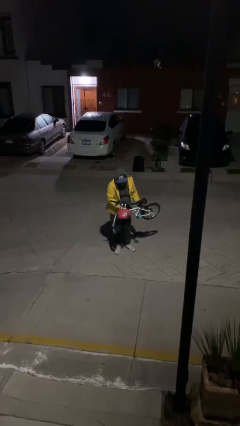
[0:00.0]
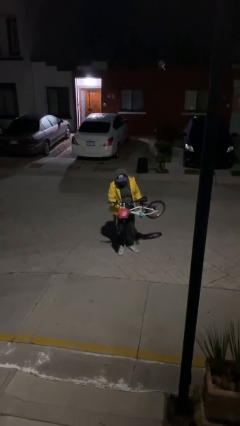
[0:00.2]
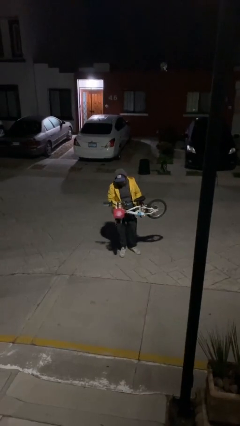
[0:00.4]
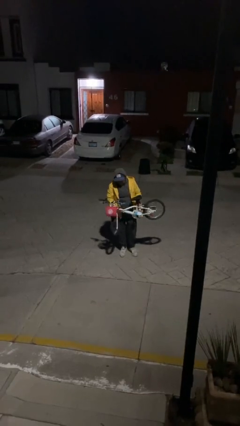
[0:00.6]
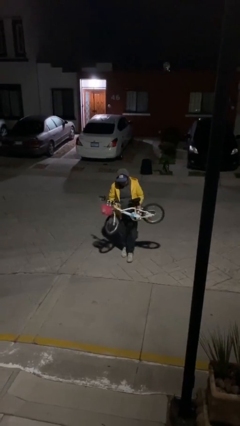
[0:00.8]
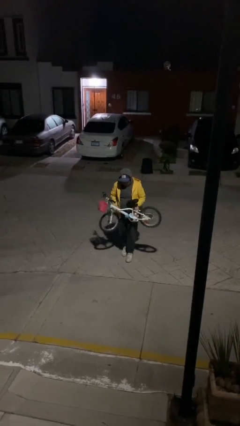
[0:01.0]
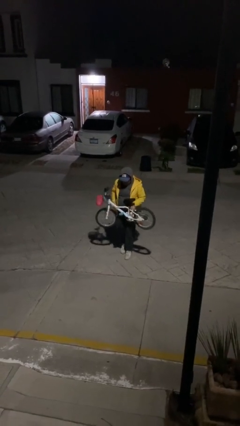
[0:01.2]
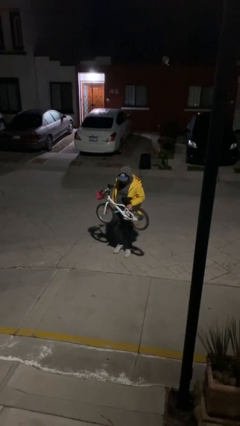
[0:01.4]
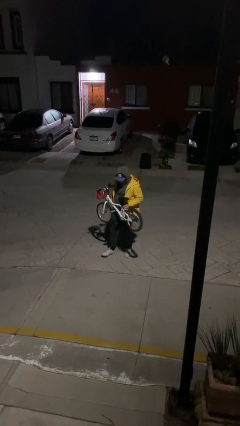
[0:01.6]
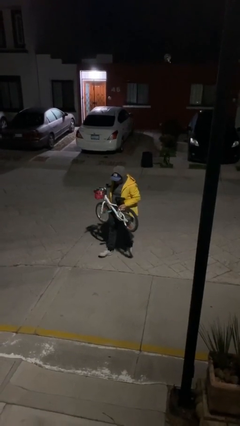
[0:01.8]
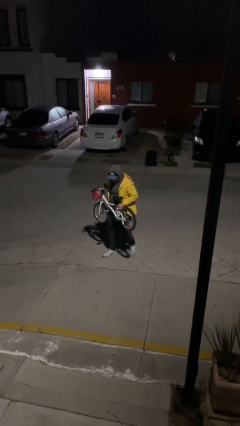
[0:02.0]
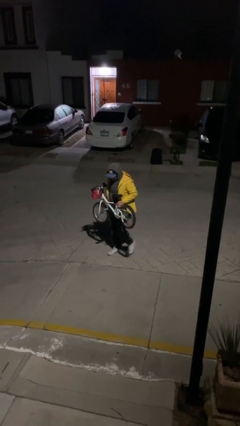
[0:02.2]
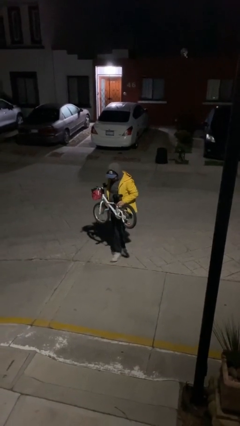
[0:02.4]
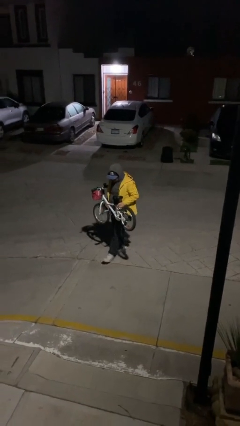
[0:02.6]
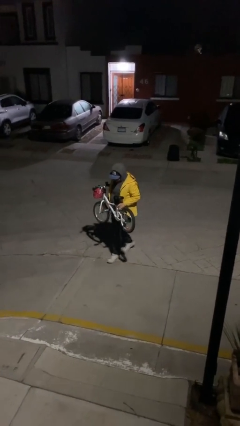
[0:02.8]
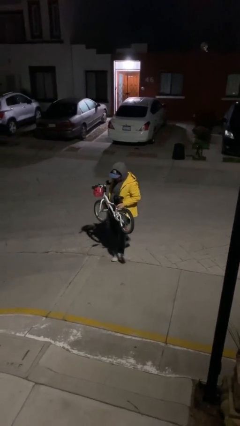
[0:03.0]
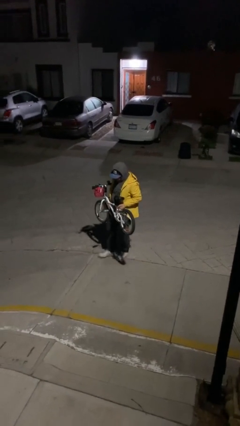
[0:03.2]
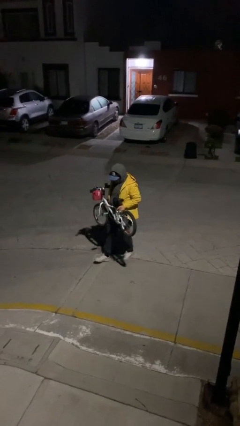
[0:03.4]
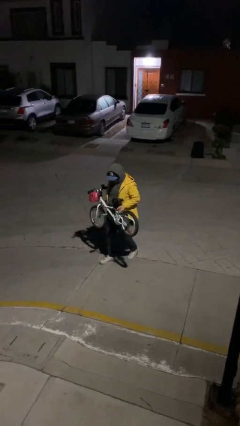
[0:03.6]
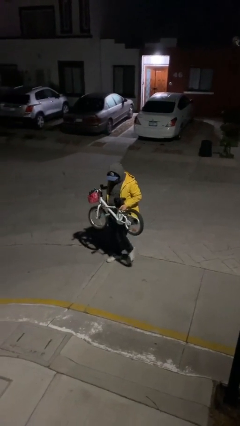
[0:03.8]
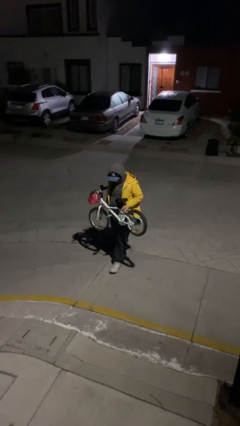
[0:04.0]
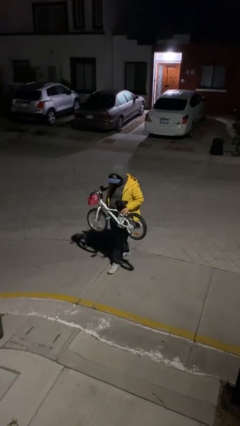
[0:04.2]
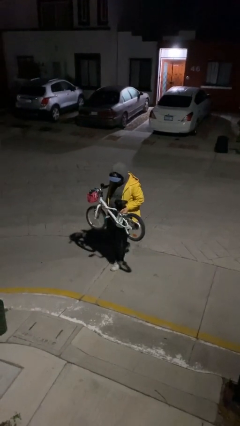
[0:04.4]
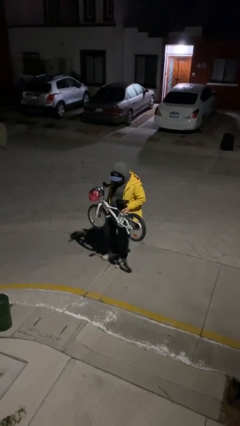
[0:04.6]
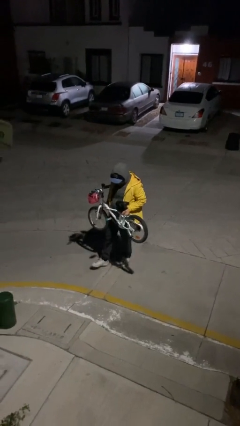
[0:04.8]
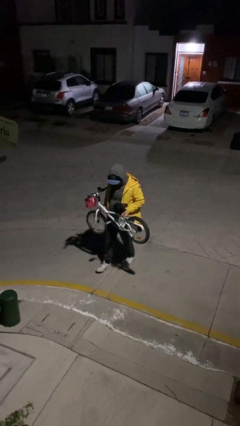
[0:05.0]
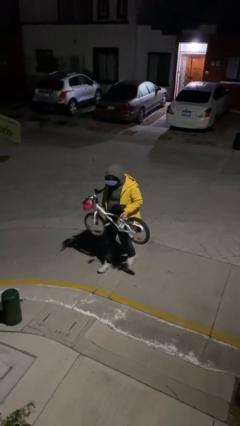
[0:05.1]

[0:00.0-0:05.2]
person carries heavy object

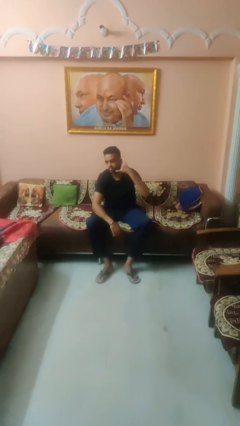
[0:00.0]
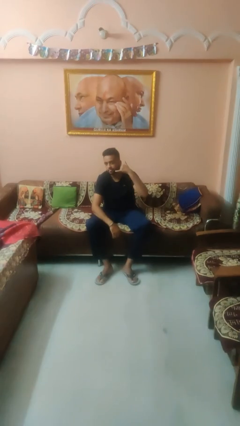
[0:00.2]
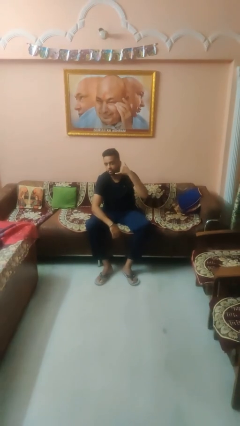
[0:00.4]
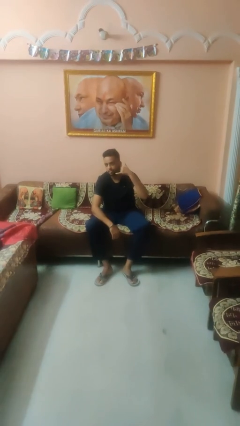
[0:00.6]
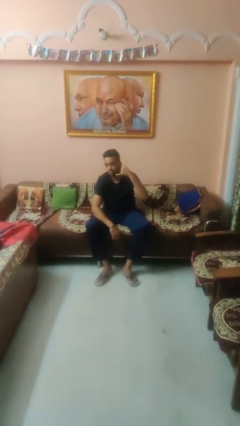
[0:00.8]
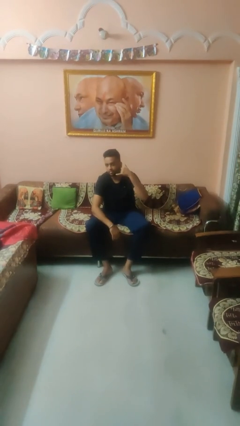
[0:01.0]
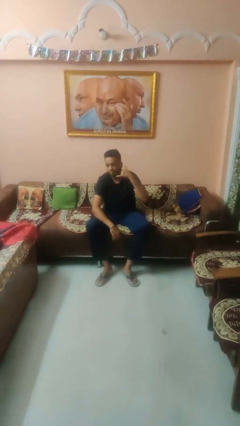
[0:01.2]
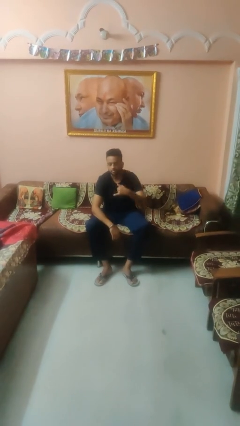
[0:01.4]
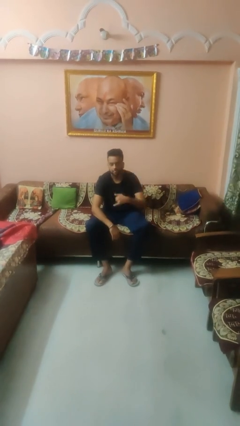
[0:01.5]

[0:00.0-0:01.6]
person gestures call me

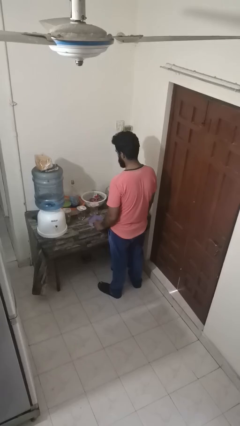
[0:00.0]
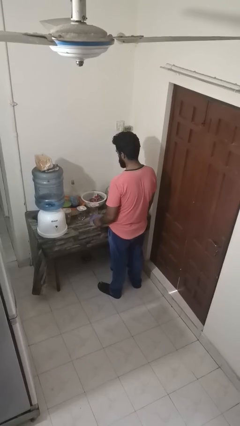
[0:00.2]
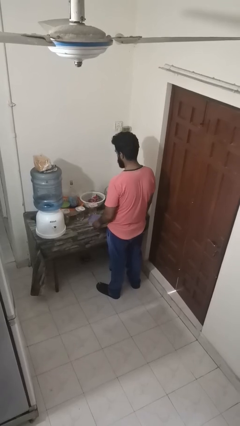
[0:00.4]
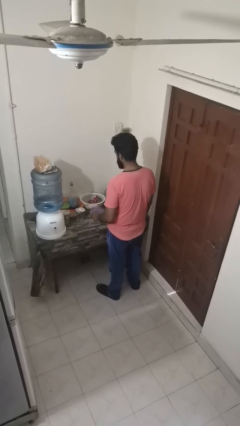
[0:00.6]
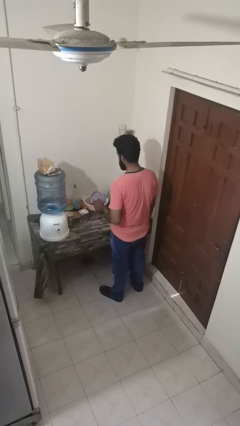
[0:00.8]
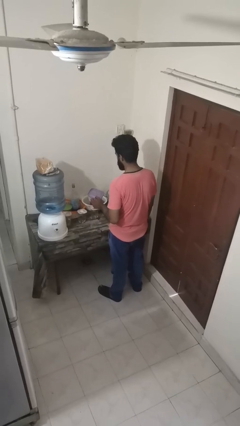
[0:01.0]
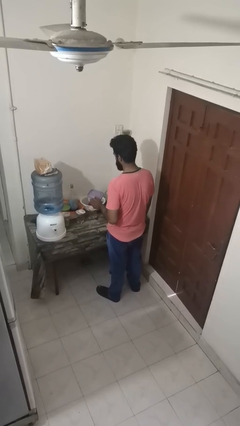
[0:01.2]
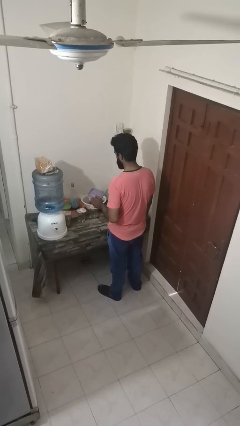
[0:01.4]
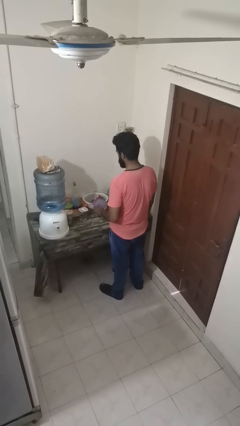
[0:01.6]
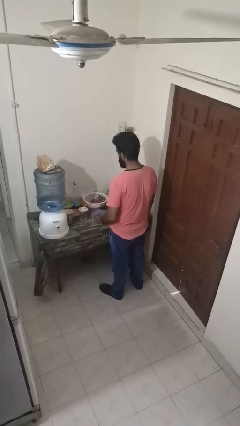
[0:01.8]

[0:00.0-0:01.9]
person picks up object from countertop

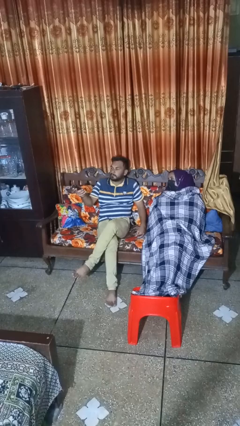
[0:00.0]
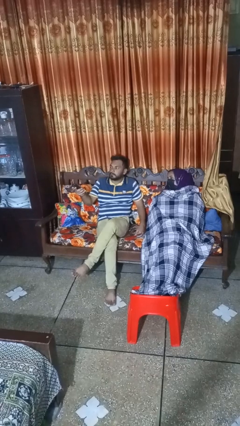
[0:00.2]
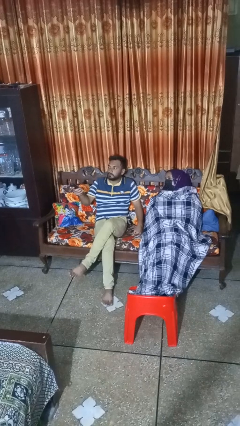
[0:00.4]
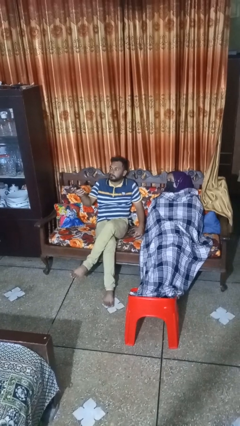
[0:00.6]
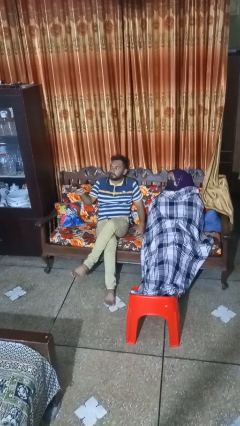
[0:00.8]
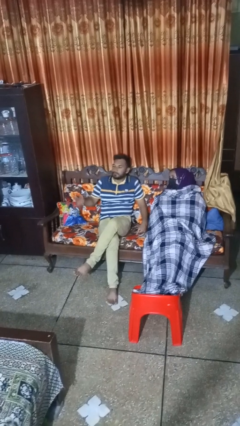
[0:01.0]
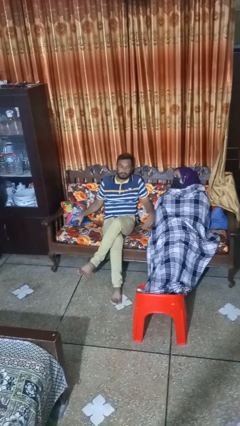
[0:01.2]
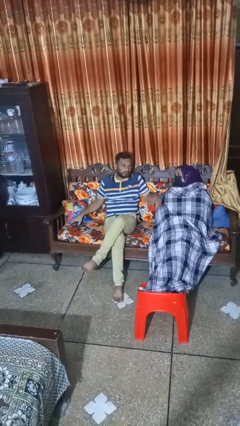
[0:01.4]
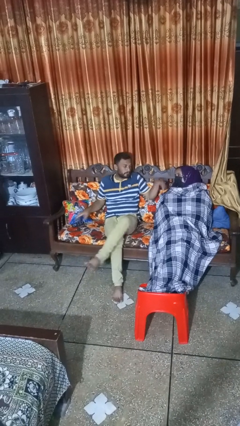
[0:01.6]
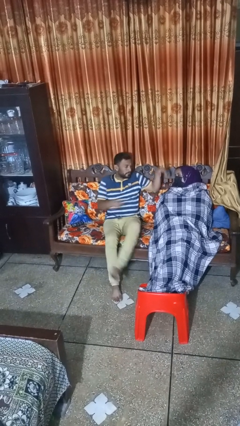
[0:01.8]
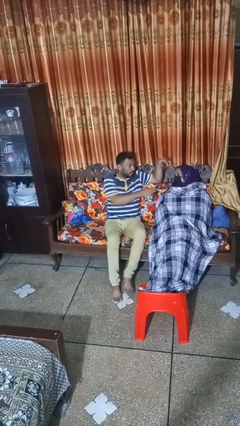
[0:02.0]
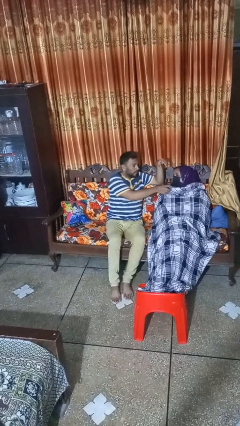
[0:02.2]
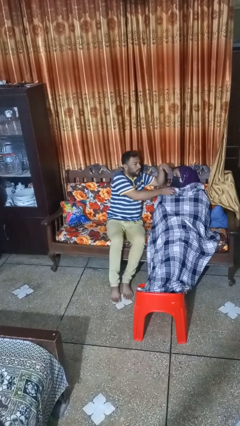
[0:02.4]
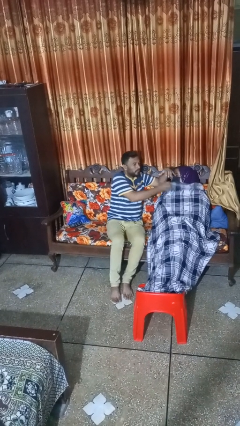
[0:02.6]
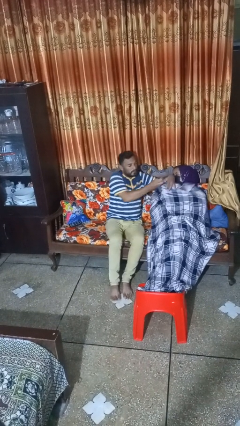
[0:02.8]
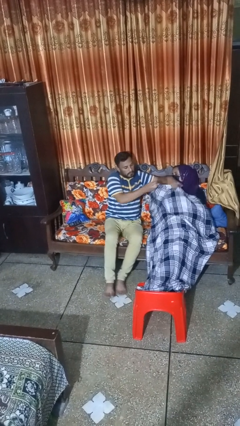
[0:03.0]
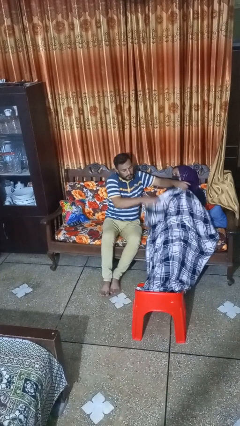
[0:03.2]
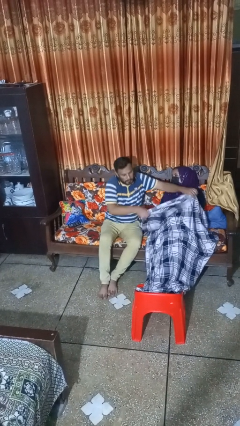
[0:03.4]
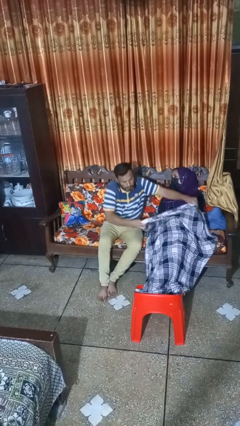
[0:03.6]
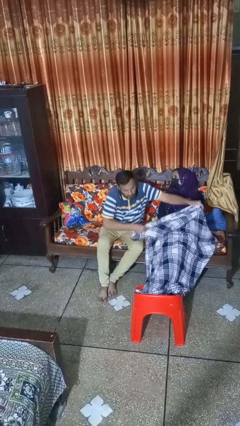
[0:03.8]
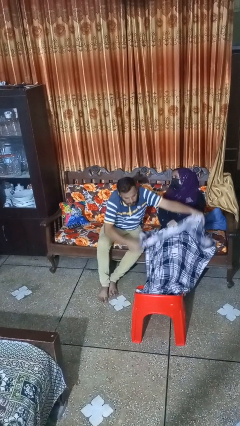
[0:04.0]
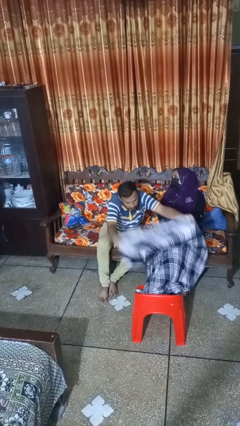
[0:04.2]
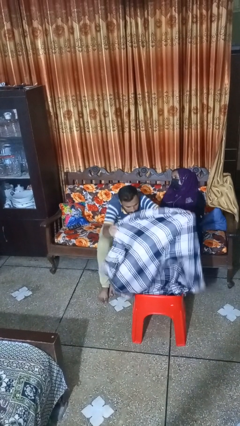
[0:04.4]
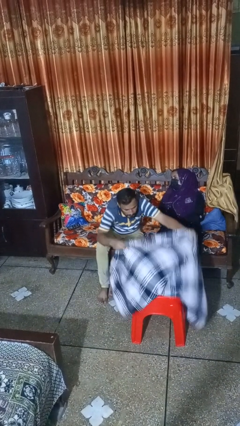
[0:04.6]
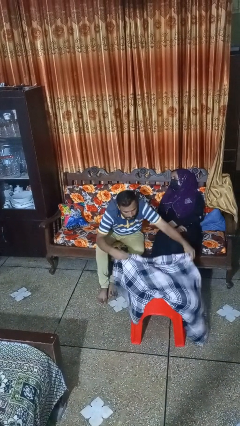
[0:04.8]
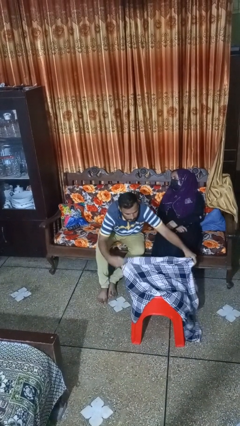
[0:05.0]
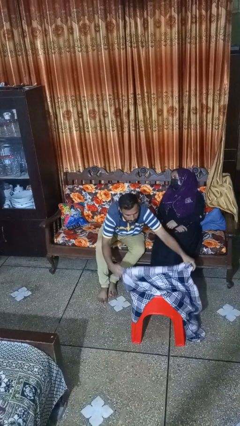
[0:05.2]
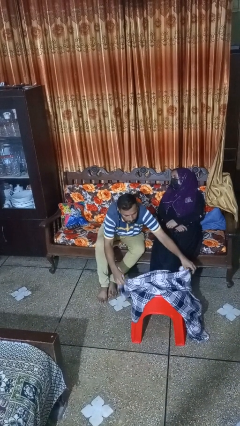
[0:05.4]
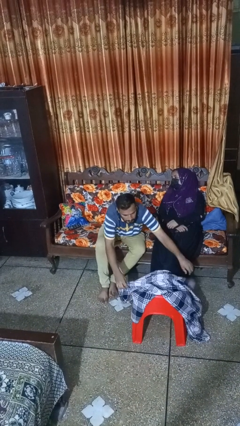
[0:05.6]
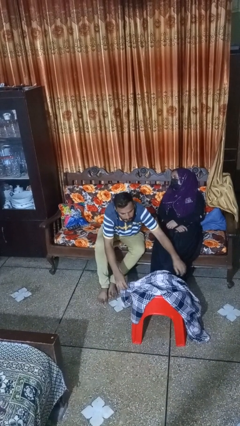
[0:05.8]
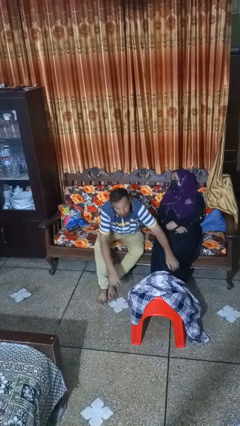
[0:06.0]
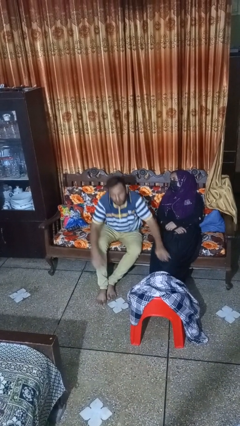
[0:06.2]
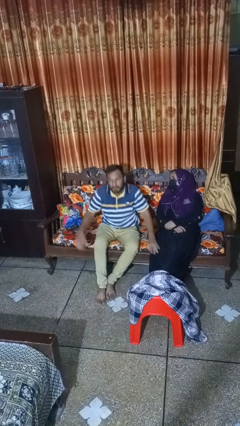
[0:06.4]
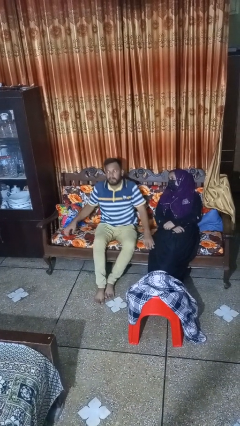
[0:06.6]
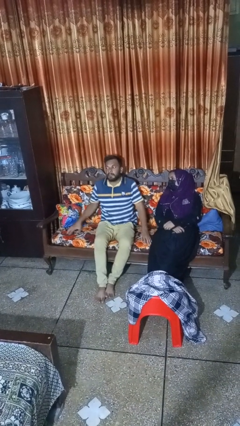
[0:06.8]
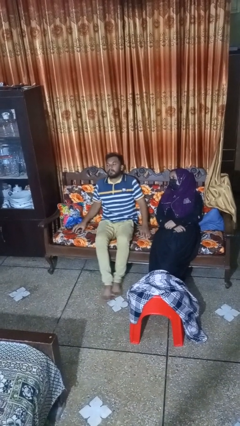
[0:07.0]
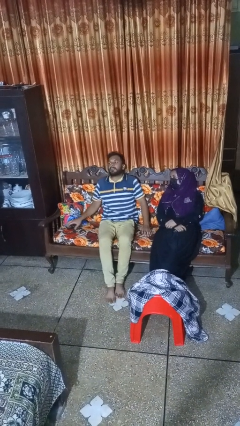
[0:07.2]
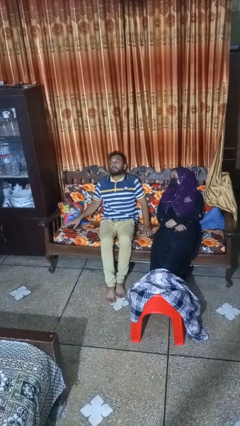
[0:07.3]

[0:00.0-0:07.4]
person uncovers friend with blanket

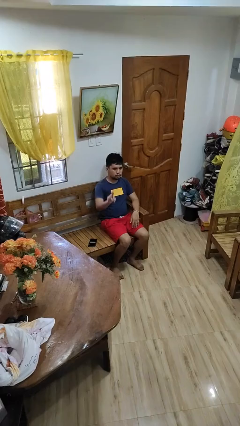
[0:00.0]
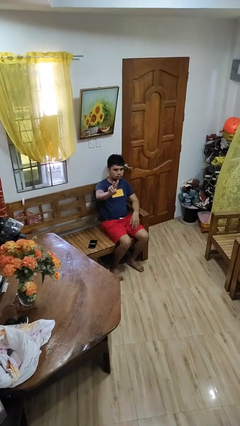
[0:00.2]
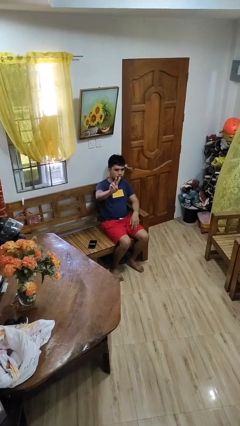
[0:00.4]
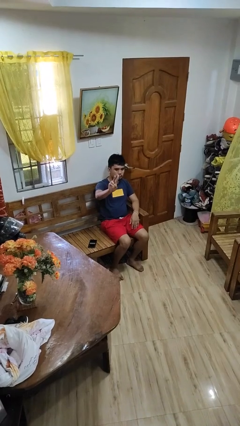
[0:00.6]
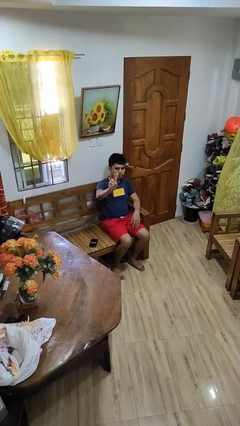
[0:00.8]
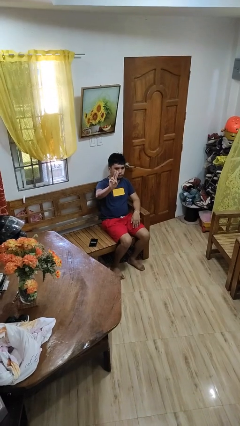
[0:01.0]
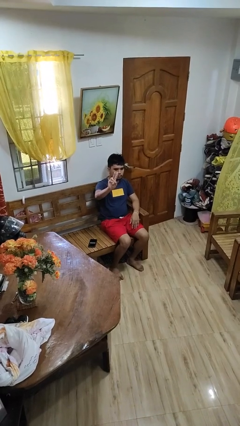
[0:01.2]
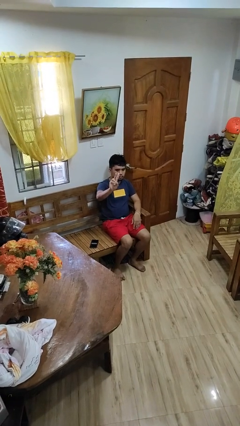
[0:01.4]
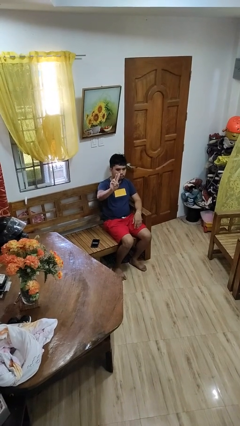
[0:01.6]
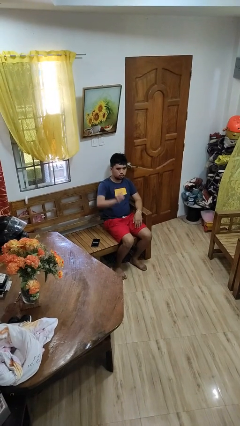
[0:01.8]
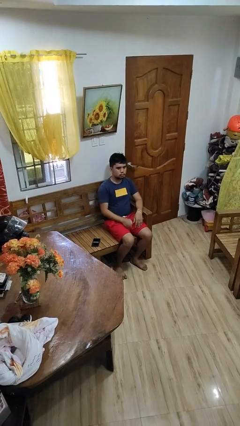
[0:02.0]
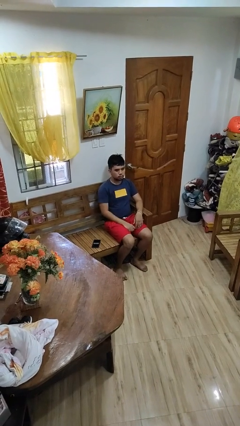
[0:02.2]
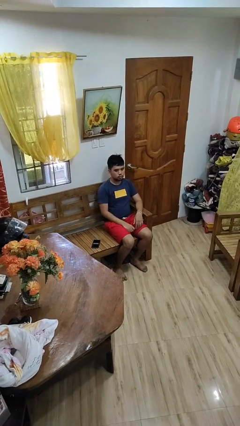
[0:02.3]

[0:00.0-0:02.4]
person gestures peace
